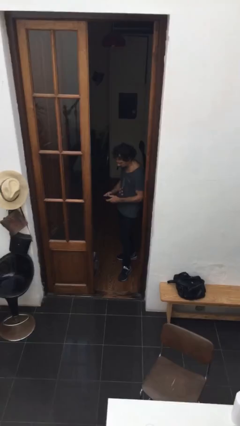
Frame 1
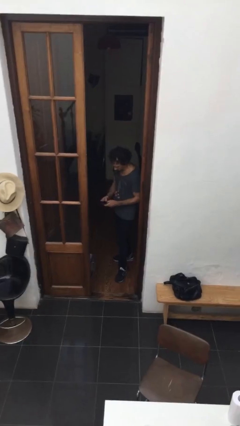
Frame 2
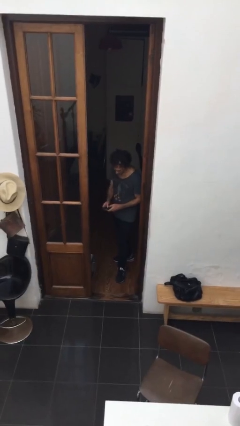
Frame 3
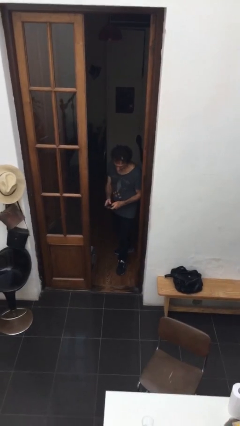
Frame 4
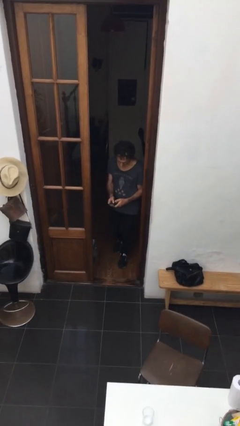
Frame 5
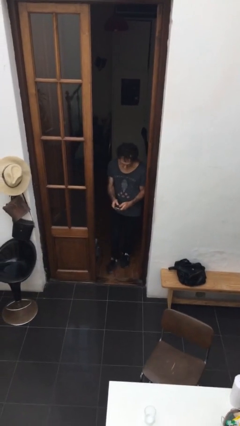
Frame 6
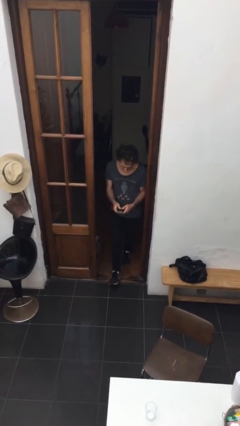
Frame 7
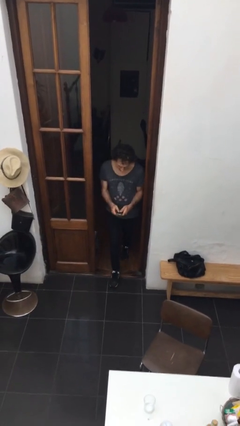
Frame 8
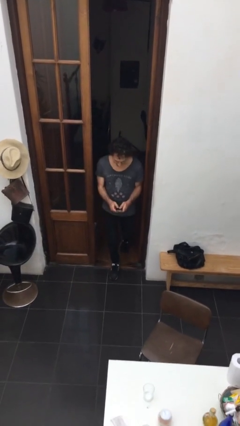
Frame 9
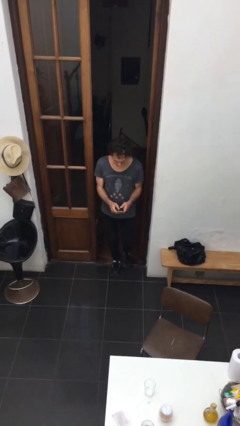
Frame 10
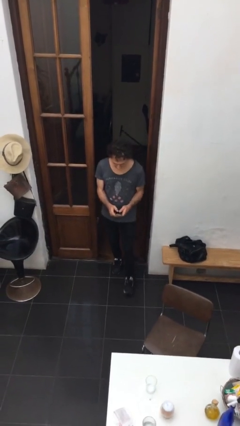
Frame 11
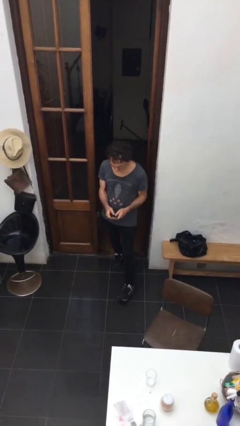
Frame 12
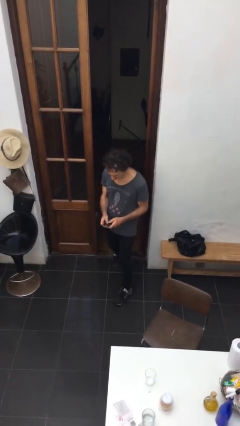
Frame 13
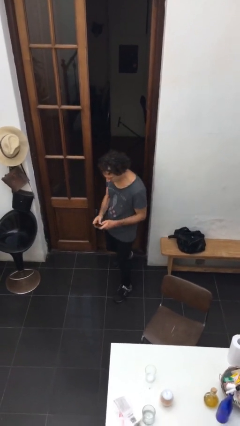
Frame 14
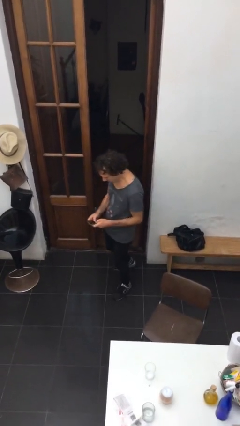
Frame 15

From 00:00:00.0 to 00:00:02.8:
person enters scene through structure

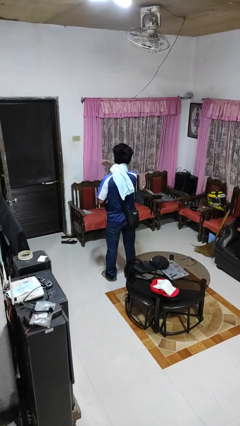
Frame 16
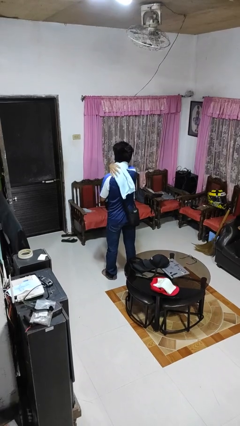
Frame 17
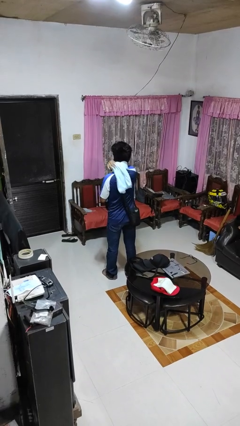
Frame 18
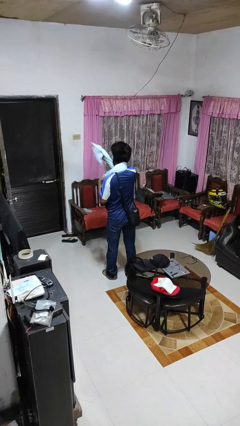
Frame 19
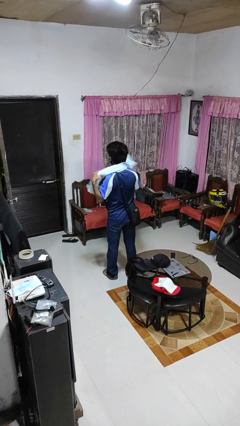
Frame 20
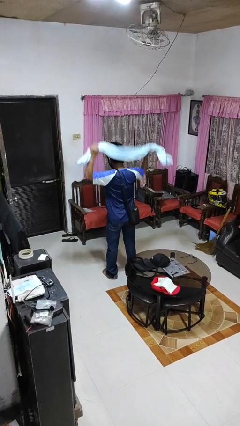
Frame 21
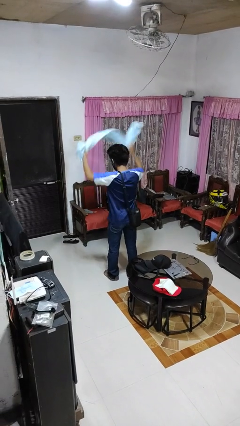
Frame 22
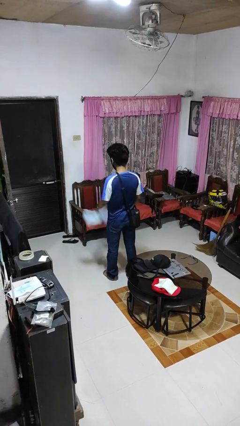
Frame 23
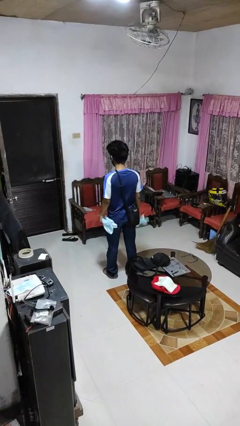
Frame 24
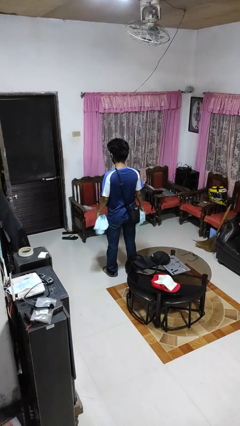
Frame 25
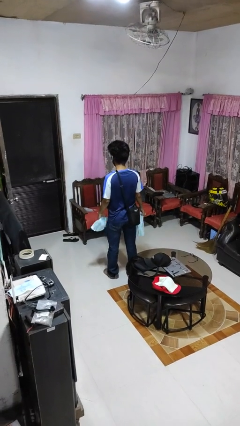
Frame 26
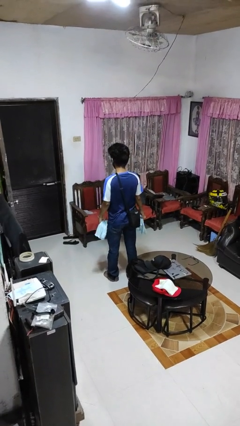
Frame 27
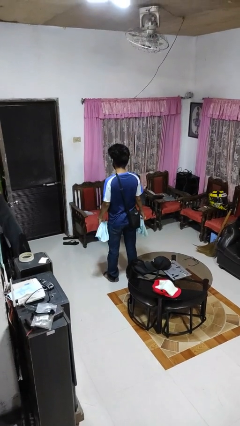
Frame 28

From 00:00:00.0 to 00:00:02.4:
person takes off scarf

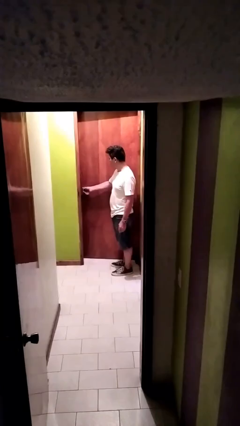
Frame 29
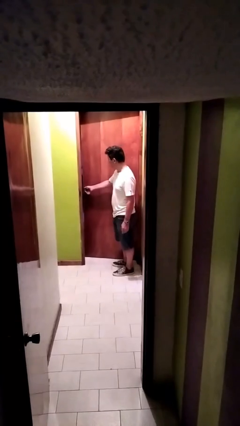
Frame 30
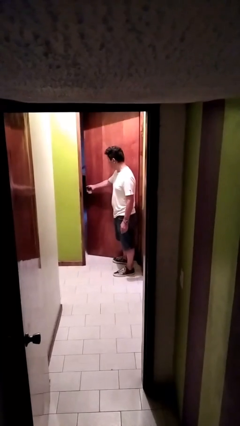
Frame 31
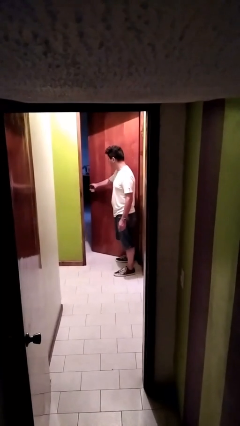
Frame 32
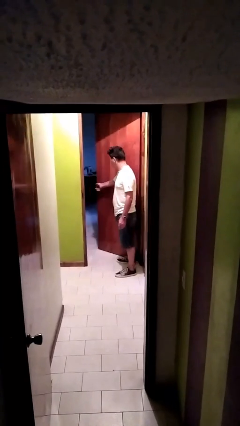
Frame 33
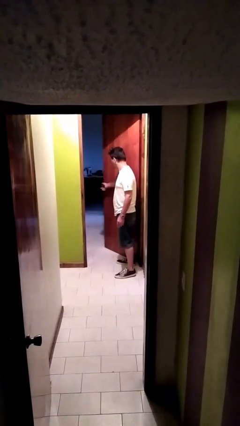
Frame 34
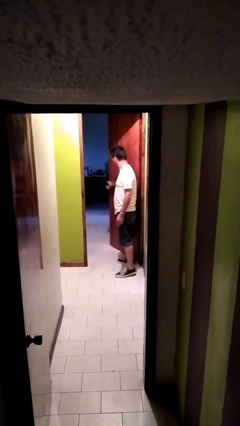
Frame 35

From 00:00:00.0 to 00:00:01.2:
person opens facility door

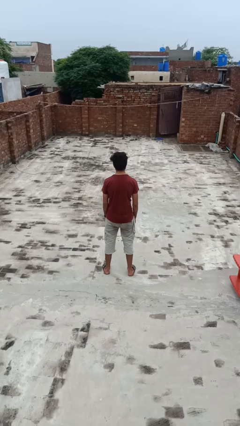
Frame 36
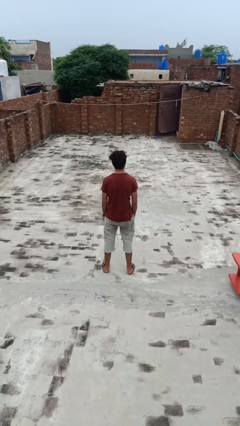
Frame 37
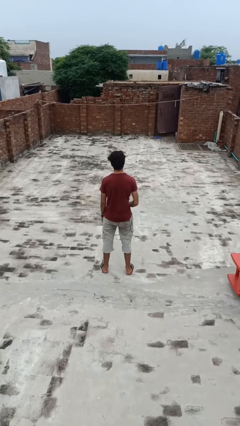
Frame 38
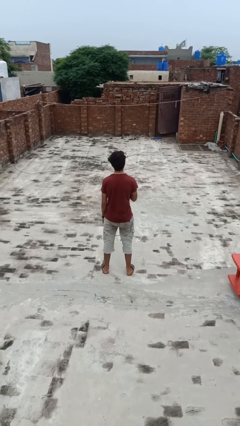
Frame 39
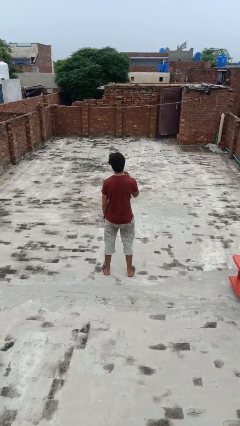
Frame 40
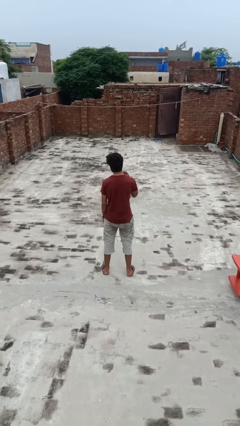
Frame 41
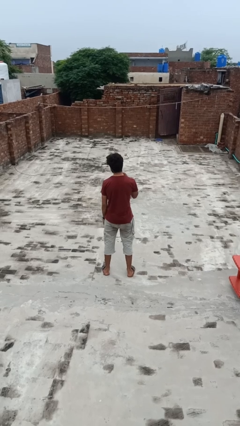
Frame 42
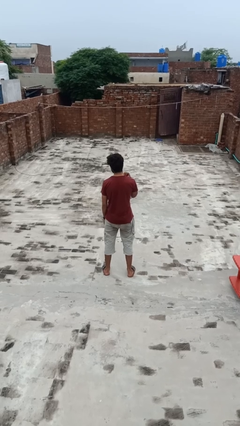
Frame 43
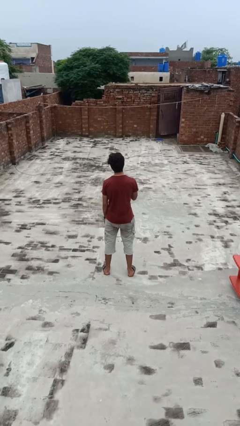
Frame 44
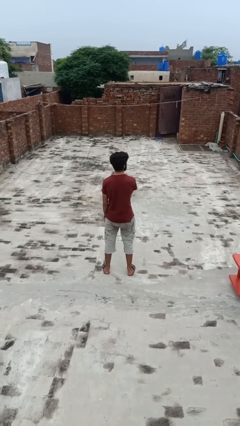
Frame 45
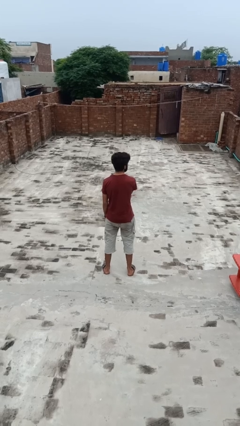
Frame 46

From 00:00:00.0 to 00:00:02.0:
person strokes chin

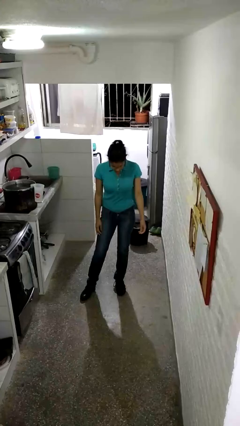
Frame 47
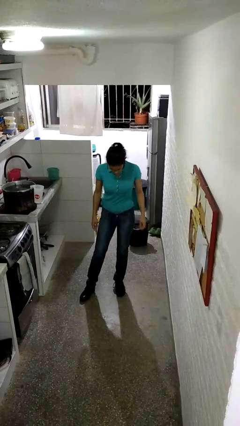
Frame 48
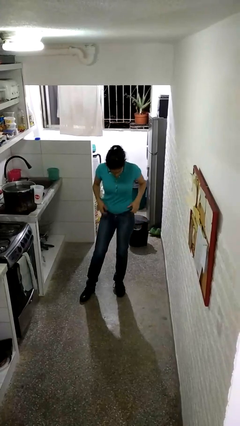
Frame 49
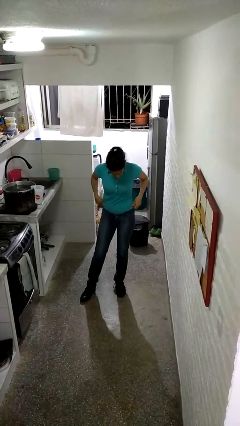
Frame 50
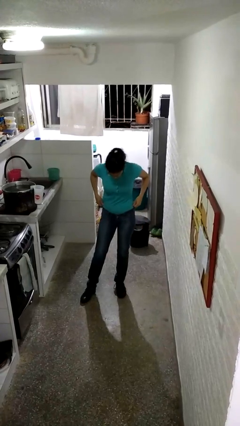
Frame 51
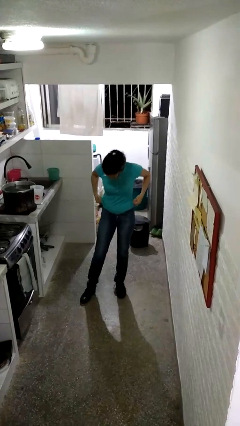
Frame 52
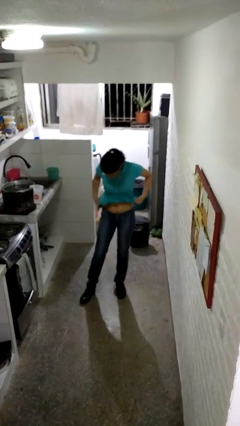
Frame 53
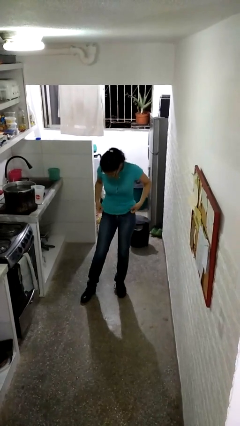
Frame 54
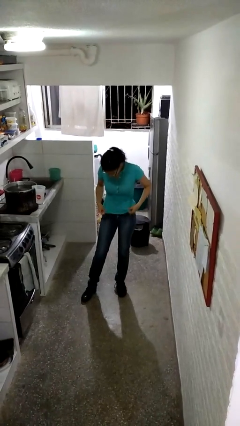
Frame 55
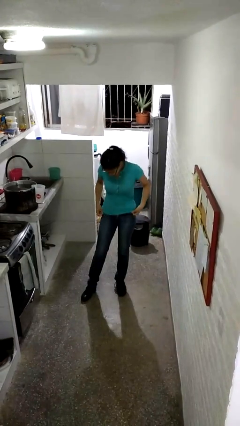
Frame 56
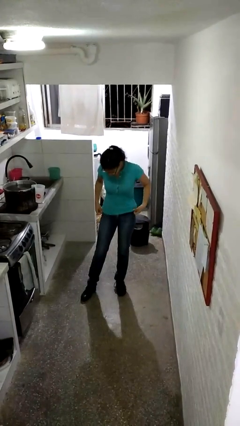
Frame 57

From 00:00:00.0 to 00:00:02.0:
person untucks shirt

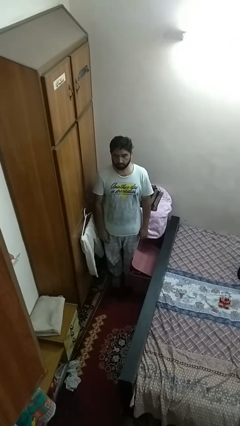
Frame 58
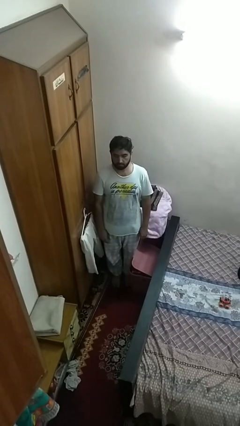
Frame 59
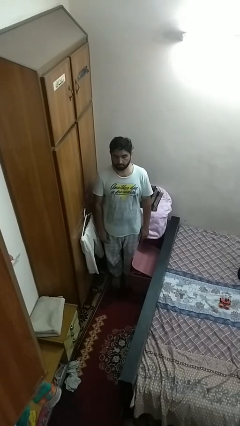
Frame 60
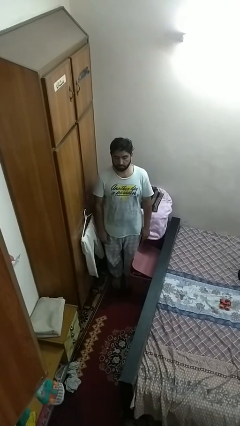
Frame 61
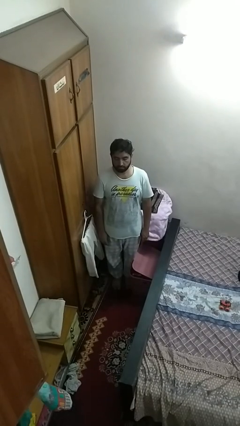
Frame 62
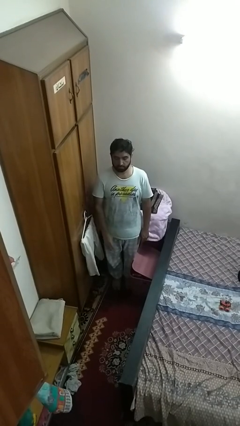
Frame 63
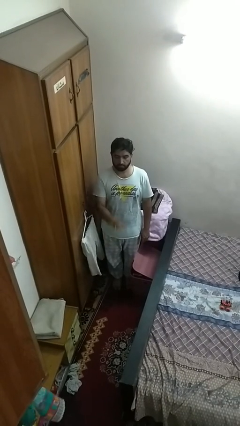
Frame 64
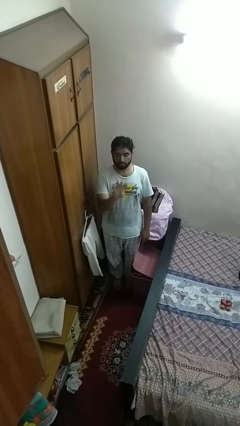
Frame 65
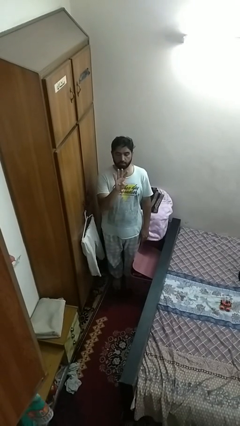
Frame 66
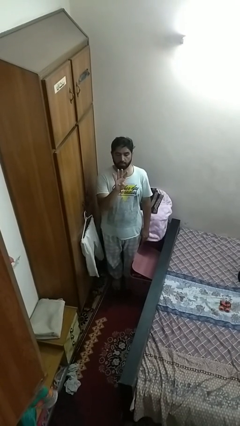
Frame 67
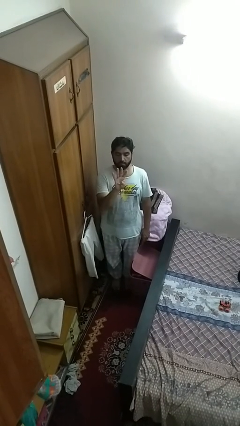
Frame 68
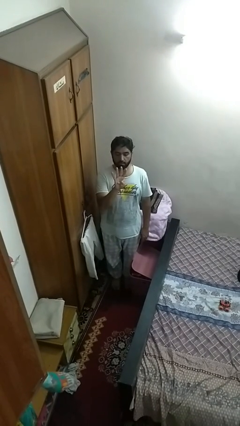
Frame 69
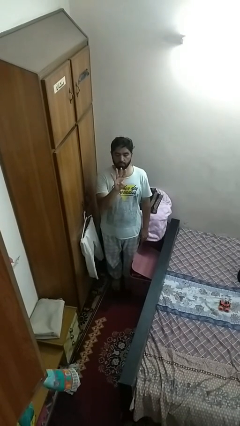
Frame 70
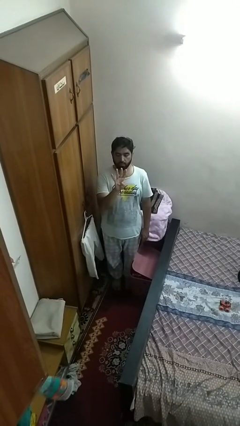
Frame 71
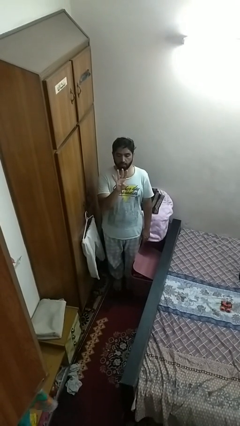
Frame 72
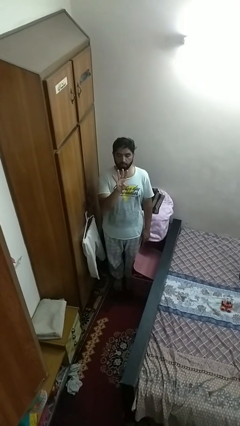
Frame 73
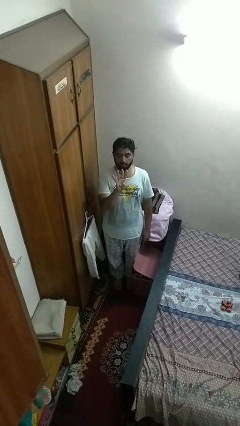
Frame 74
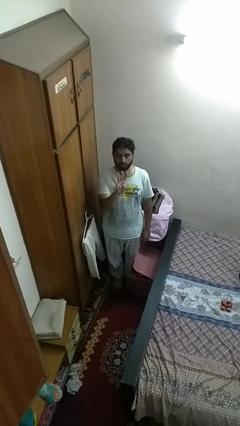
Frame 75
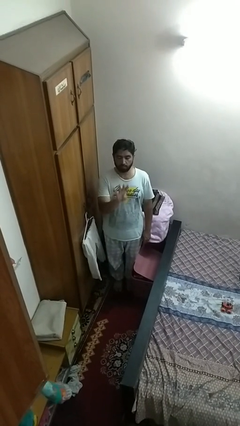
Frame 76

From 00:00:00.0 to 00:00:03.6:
person gestures number four

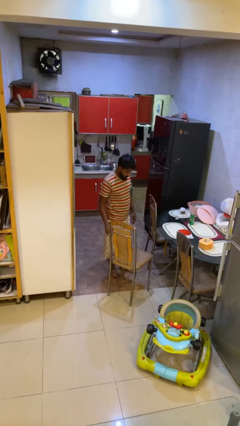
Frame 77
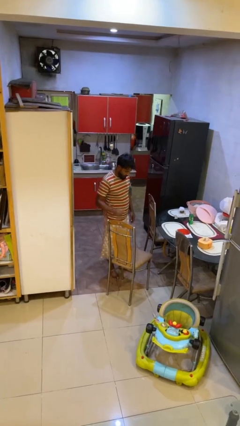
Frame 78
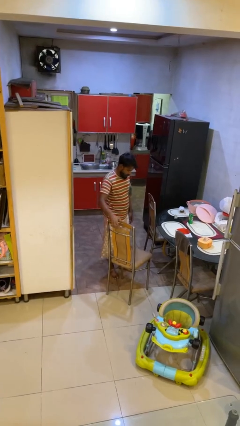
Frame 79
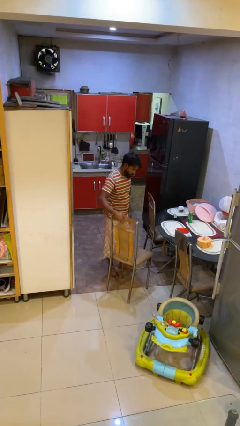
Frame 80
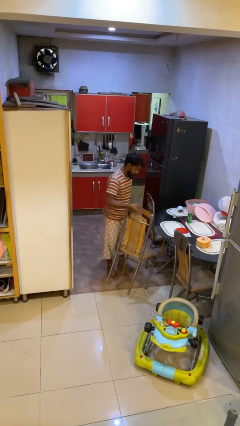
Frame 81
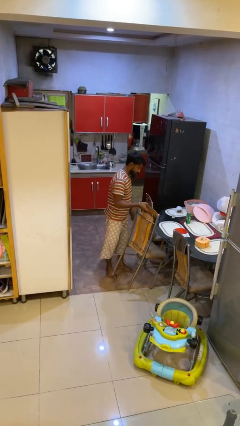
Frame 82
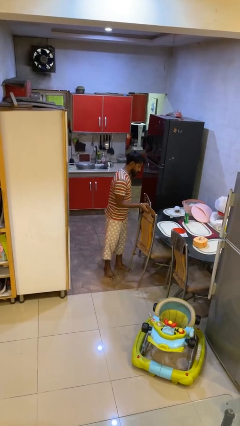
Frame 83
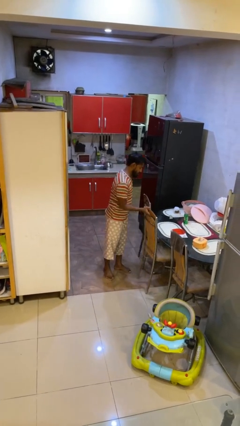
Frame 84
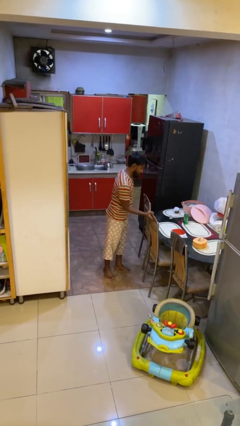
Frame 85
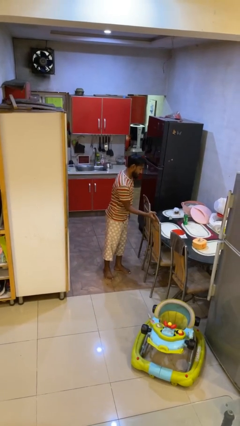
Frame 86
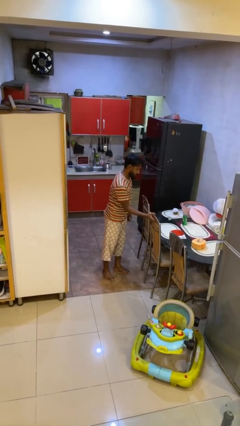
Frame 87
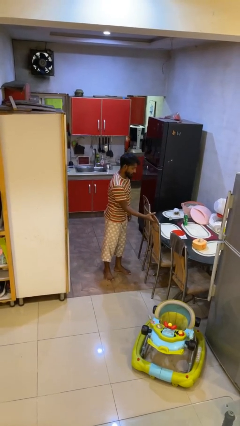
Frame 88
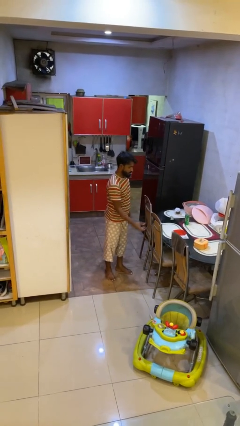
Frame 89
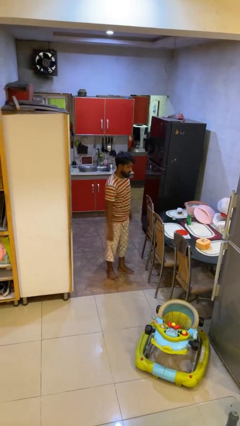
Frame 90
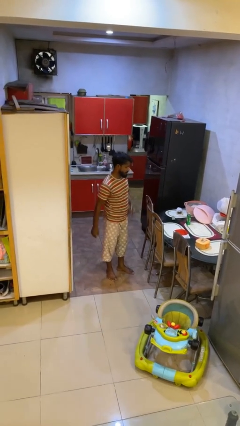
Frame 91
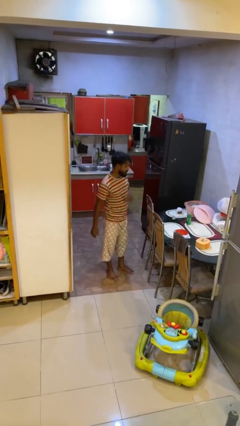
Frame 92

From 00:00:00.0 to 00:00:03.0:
person pushes in chair
